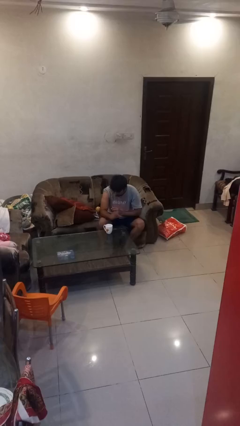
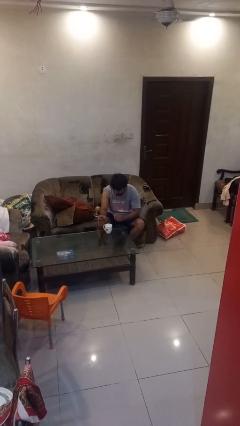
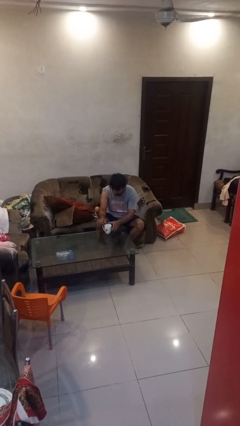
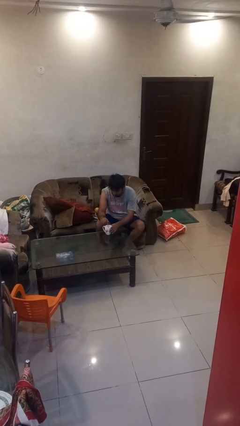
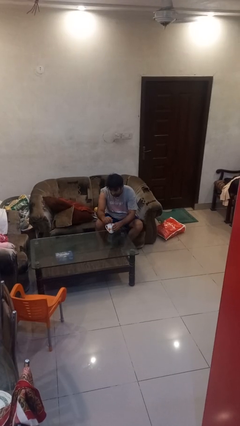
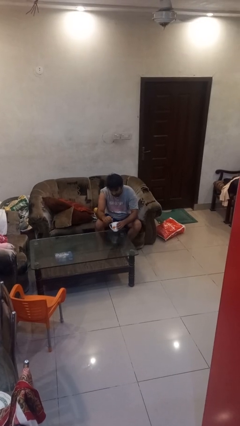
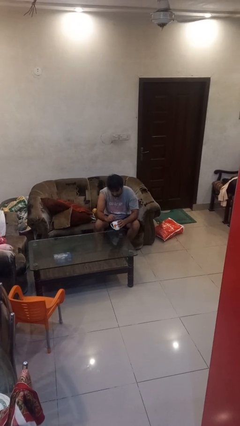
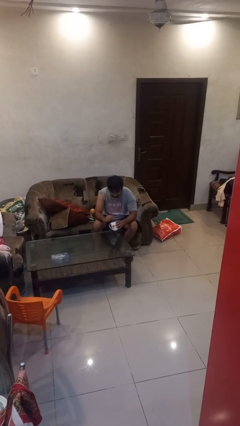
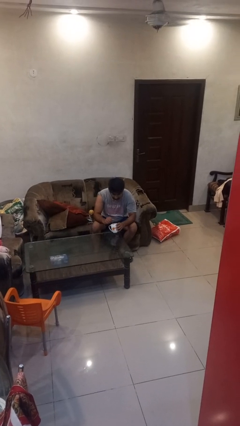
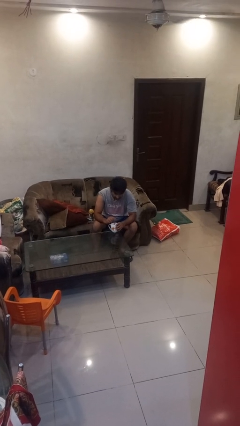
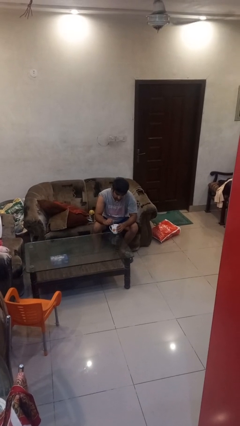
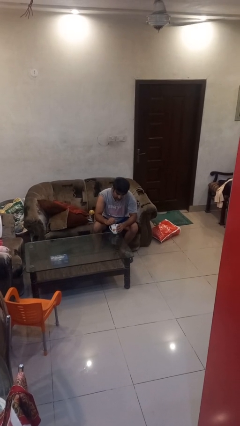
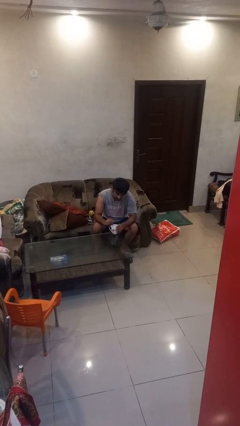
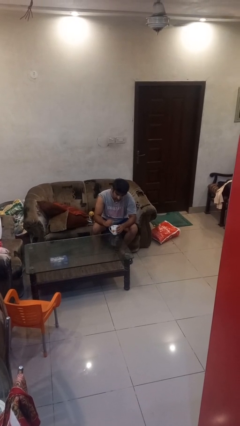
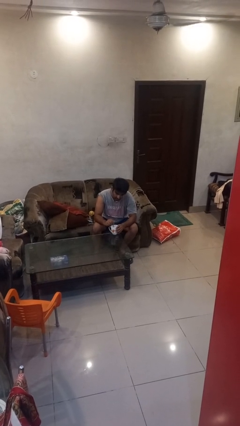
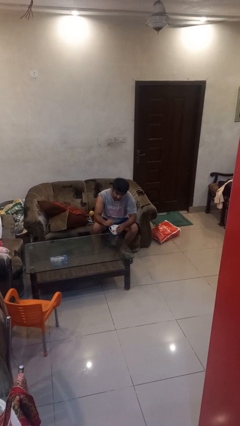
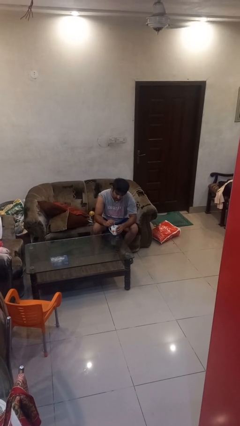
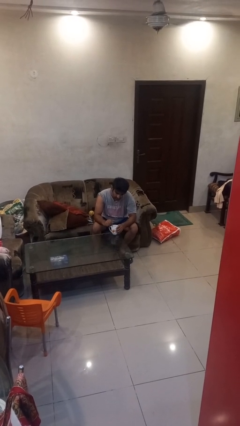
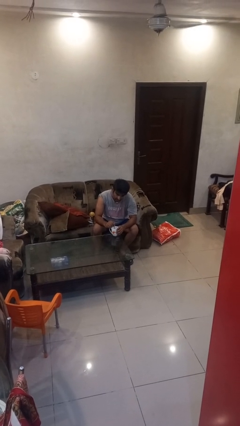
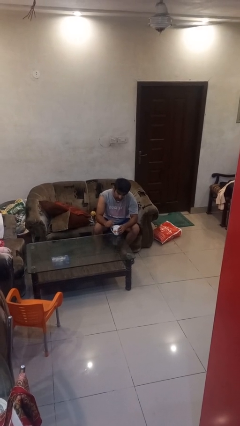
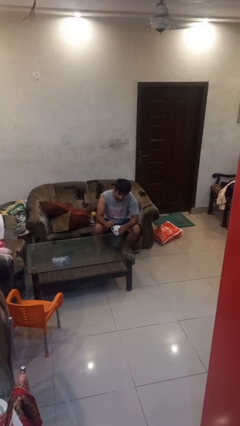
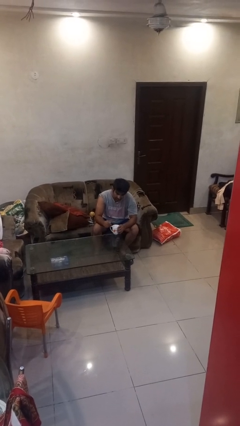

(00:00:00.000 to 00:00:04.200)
person stirs mug

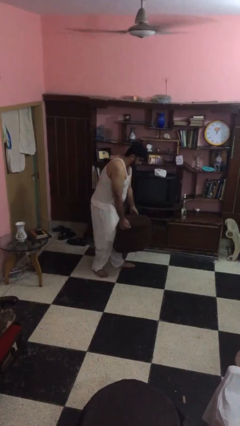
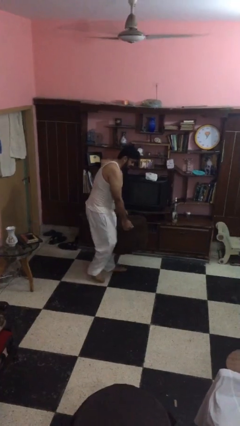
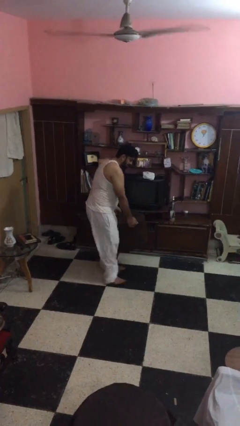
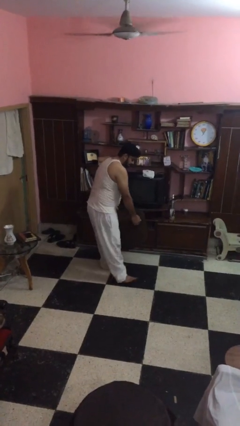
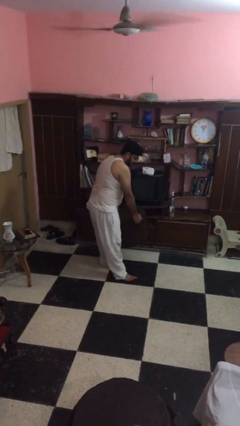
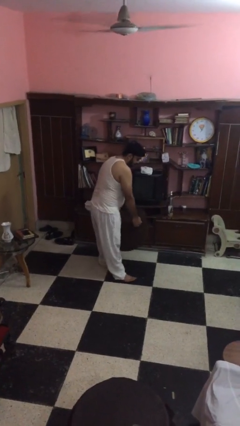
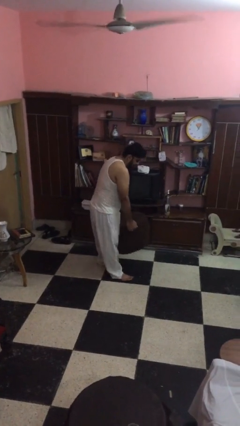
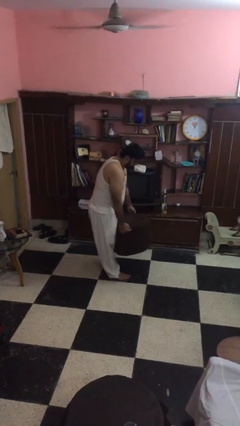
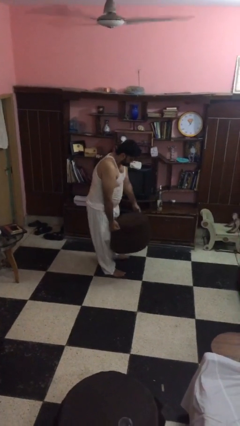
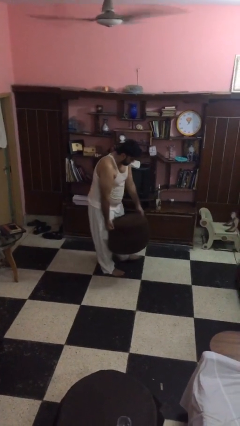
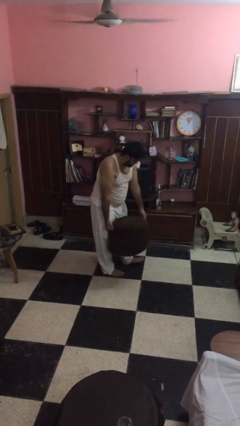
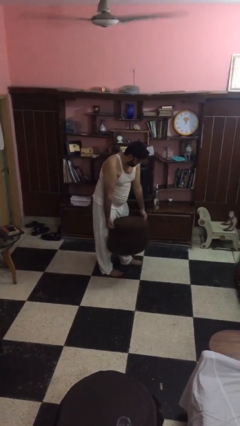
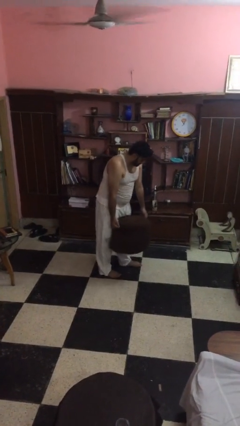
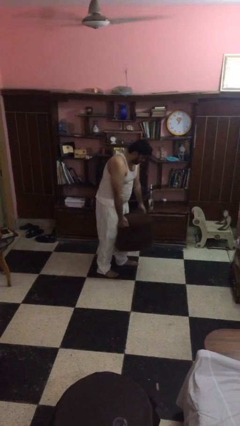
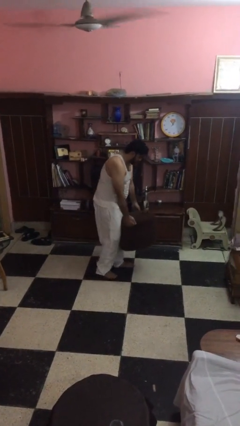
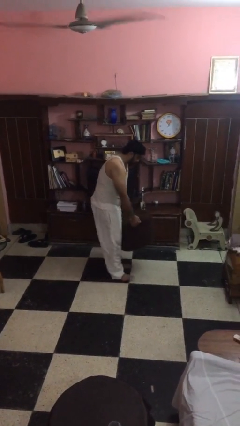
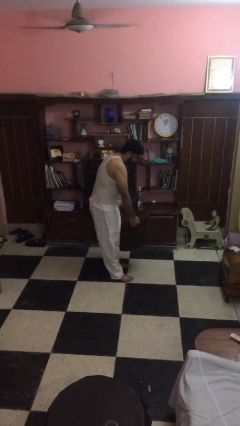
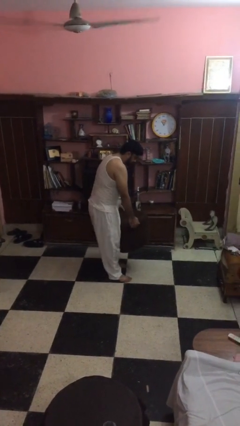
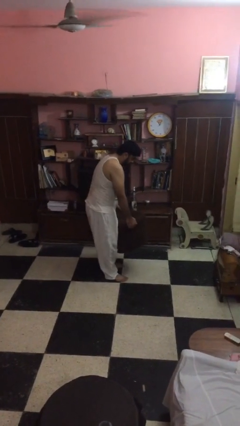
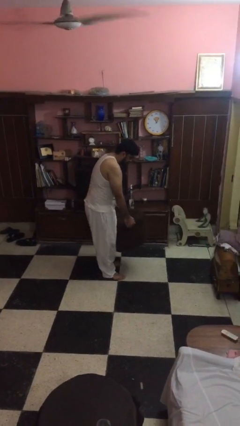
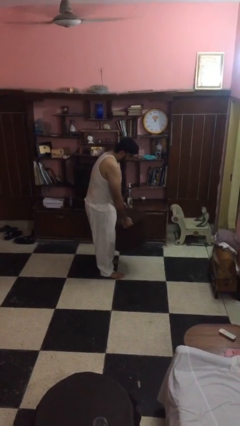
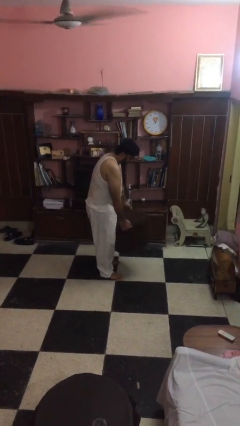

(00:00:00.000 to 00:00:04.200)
person carries heavy object

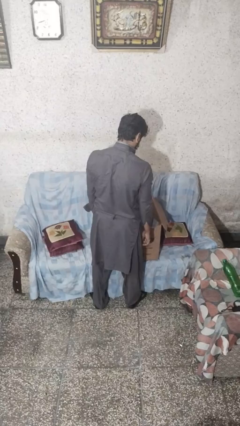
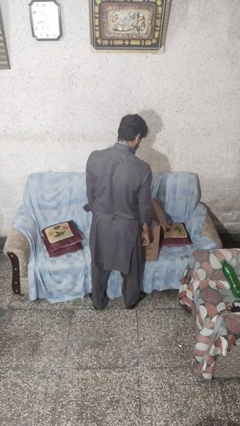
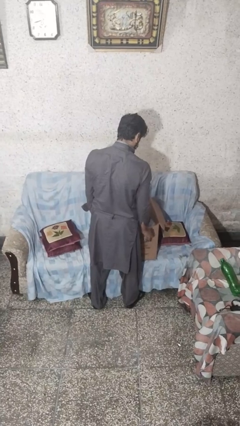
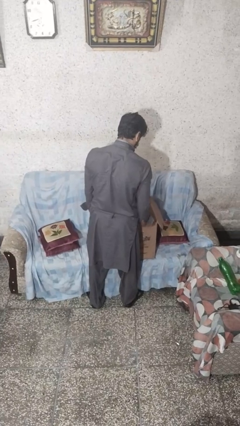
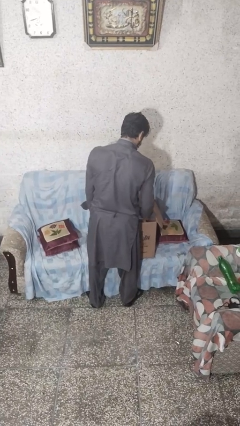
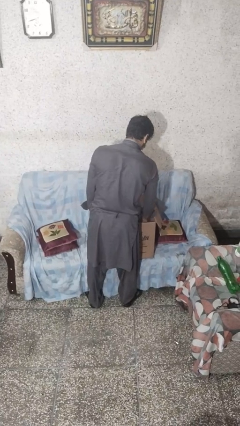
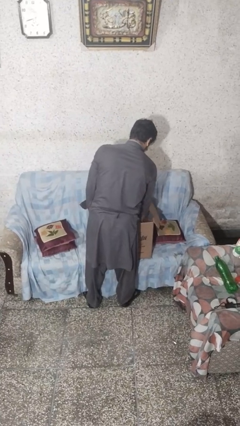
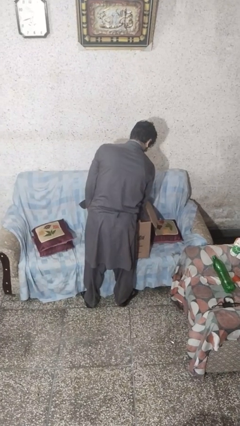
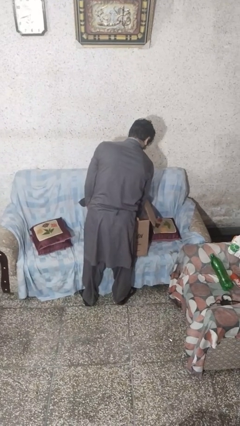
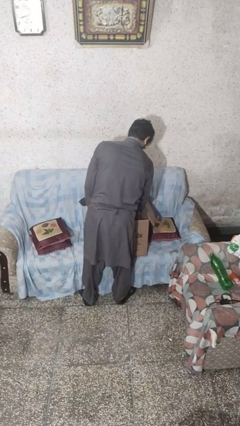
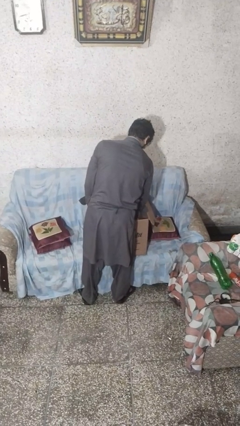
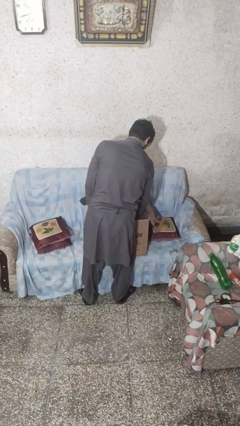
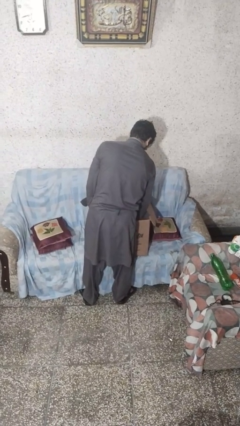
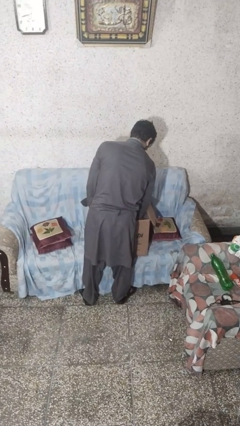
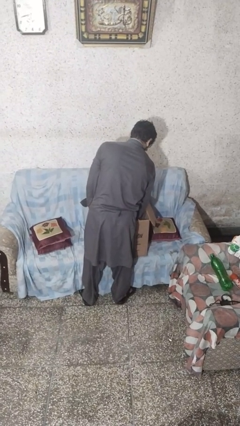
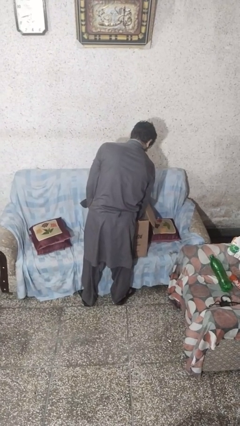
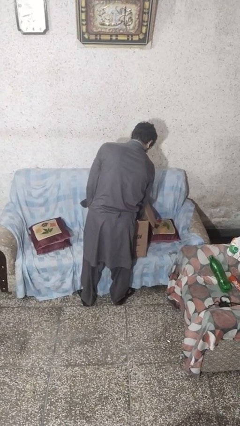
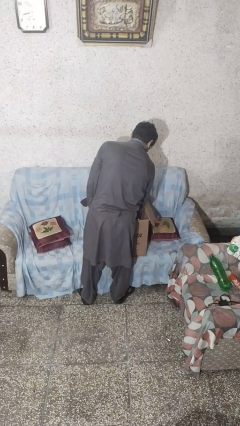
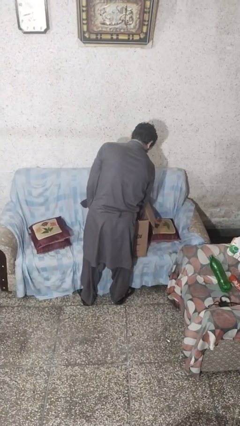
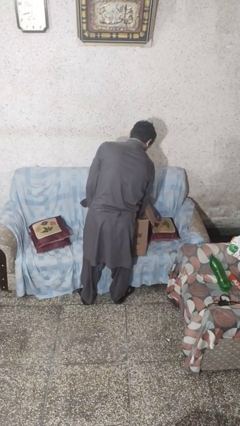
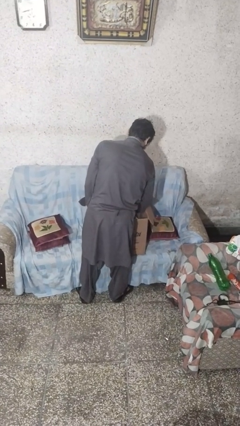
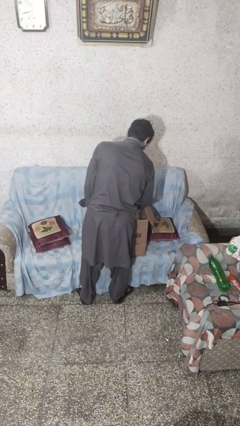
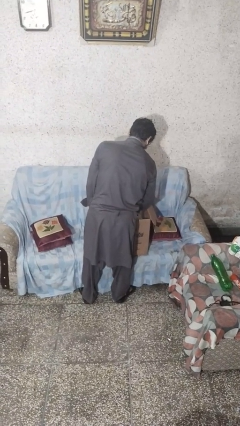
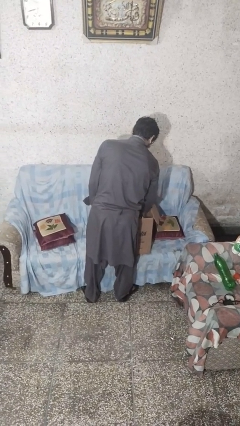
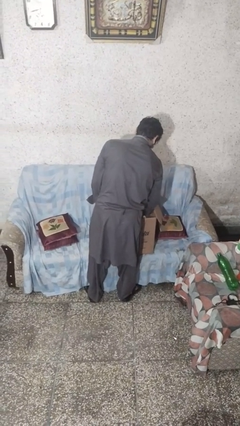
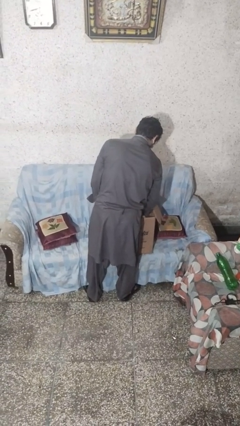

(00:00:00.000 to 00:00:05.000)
person searches in box

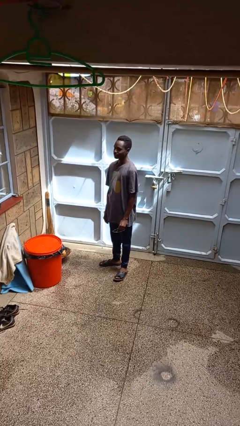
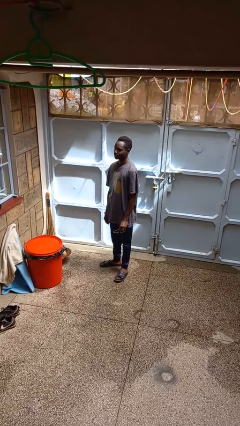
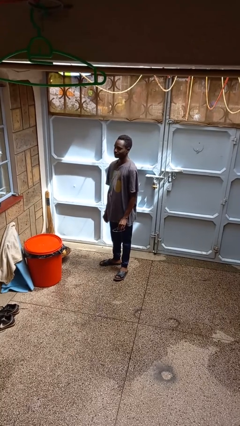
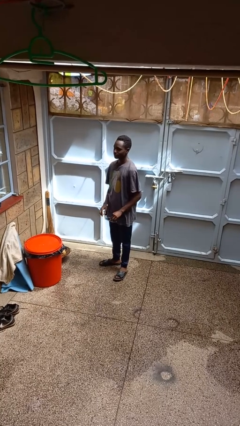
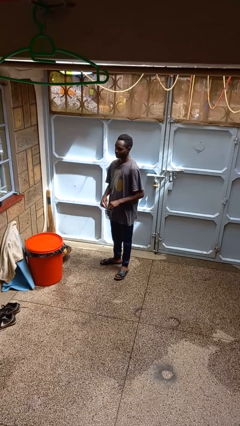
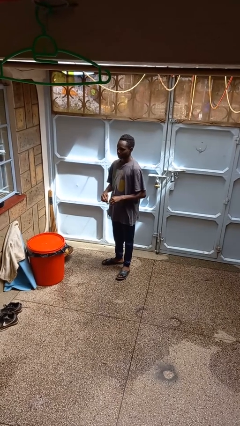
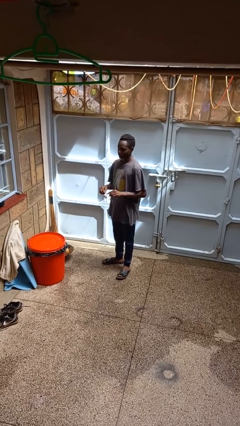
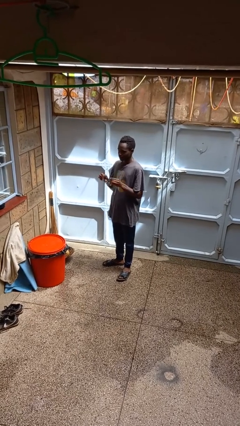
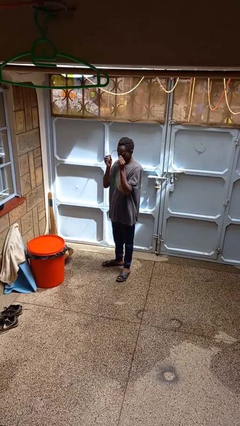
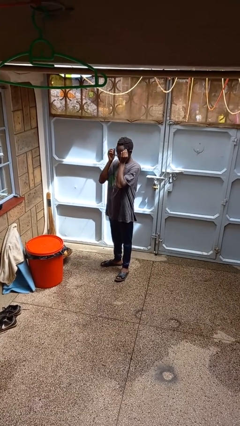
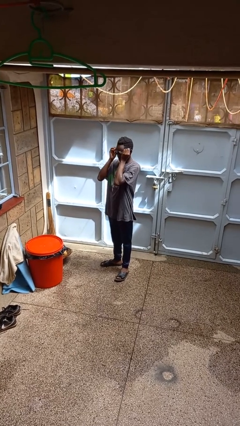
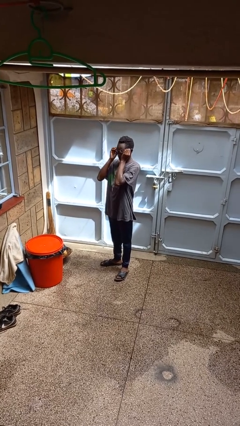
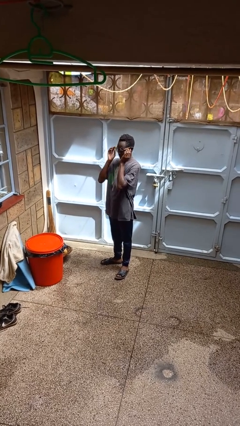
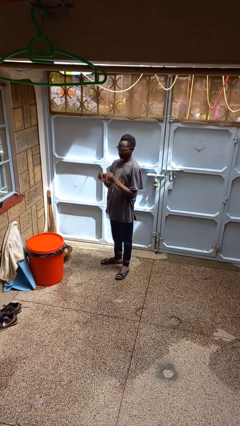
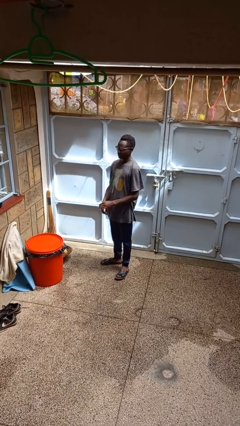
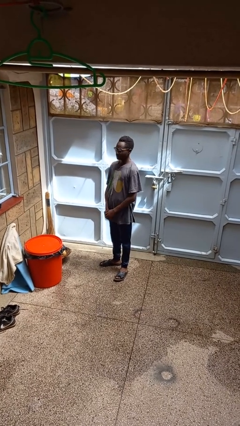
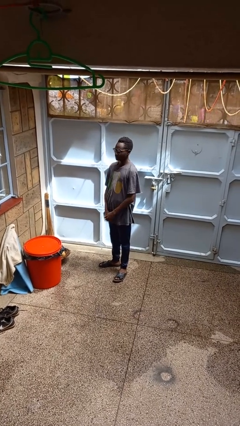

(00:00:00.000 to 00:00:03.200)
person puts on glasses

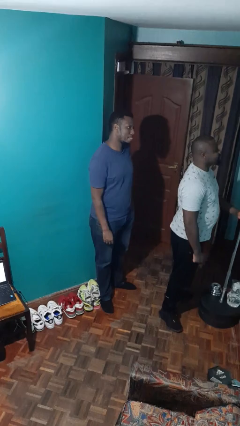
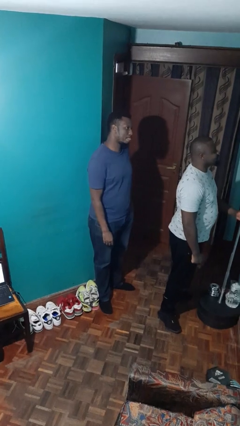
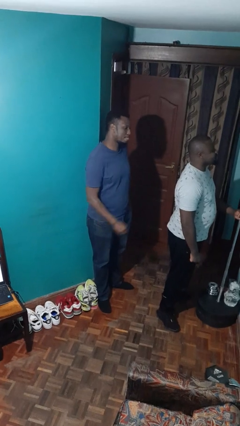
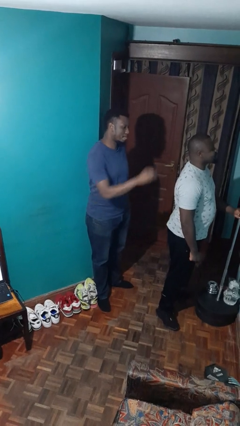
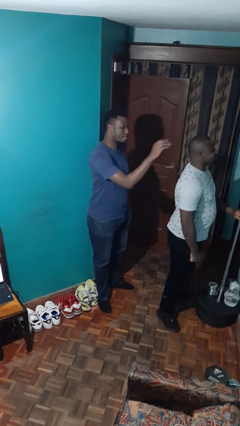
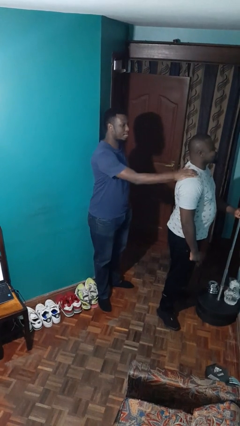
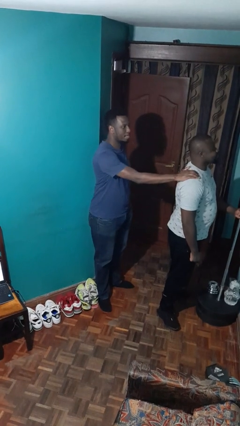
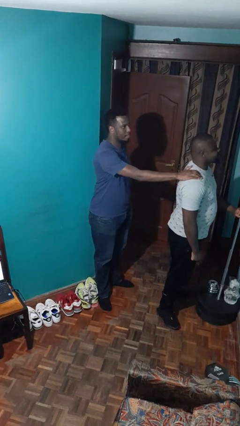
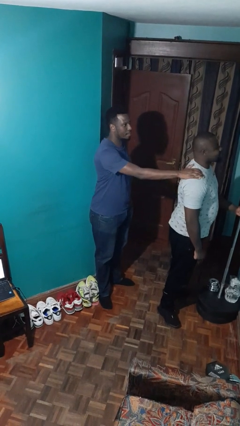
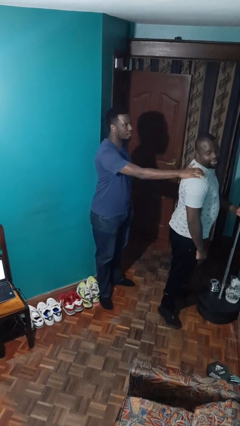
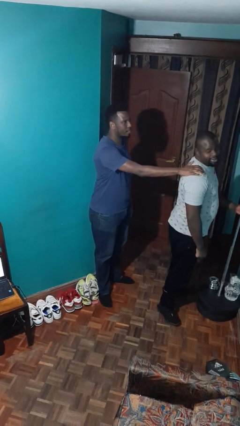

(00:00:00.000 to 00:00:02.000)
person grabs person by shoulder
